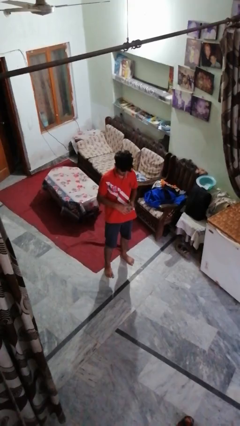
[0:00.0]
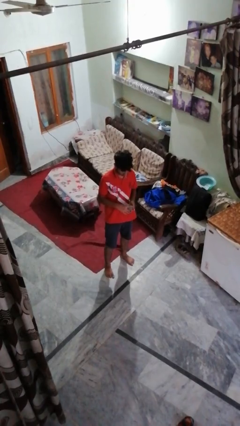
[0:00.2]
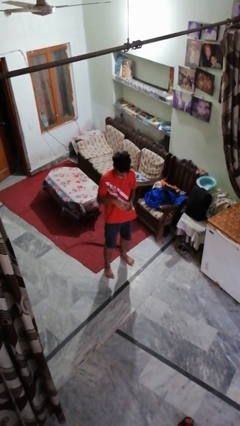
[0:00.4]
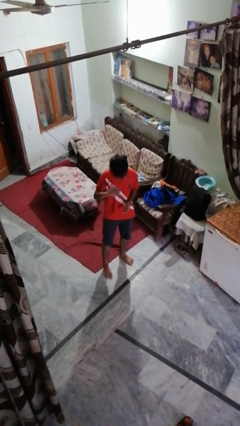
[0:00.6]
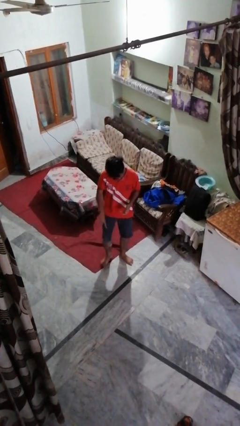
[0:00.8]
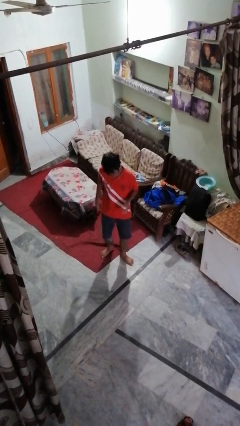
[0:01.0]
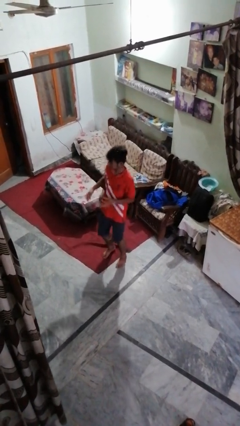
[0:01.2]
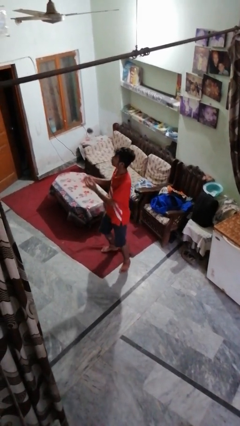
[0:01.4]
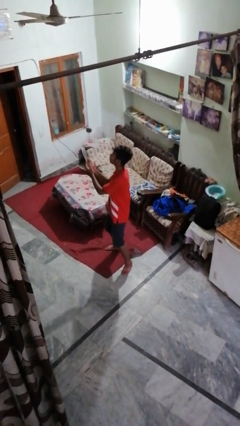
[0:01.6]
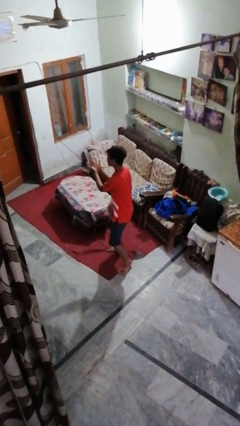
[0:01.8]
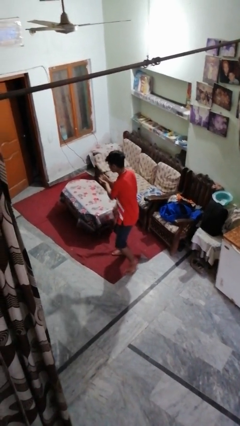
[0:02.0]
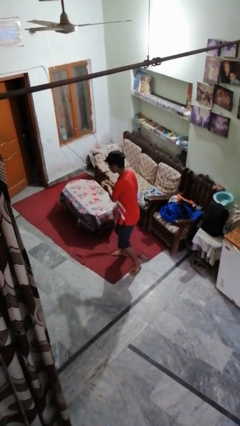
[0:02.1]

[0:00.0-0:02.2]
person bounces ball on floor

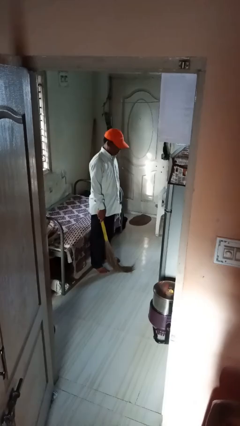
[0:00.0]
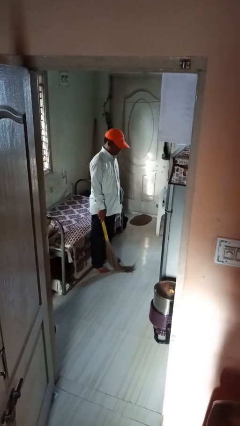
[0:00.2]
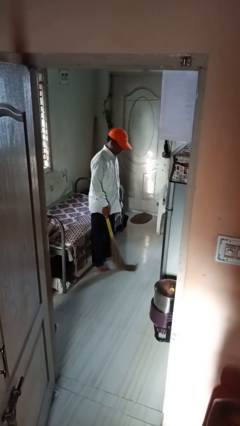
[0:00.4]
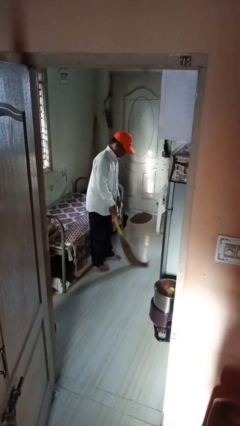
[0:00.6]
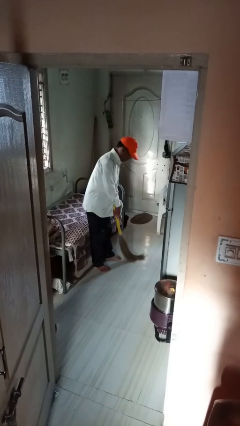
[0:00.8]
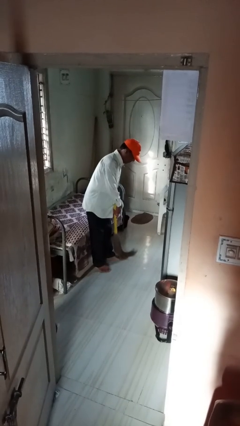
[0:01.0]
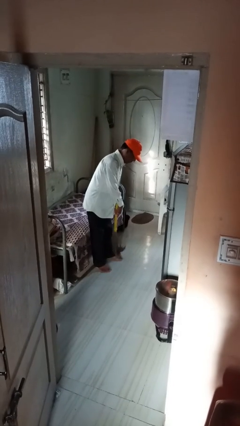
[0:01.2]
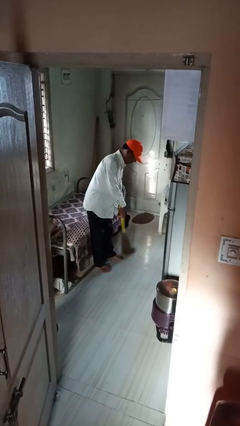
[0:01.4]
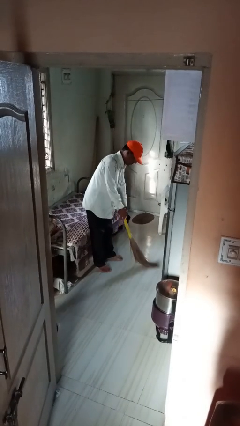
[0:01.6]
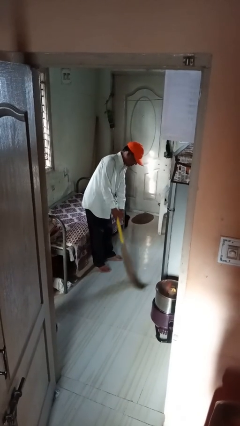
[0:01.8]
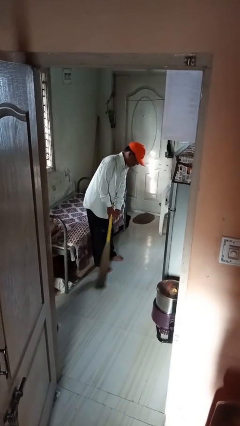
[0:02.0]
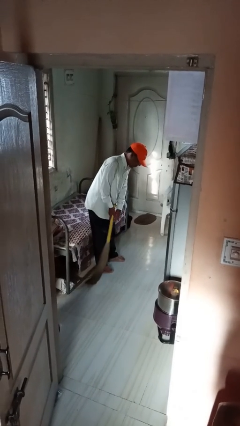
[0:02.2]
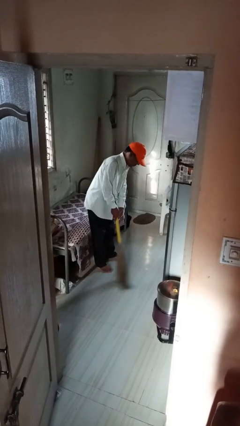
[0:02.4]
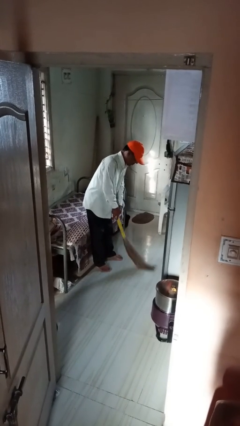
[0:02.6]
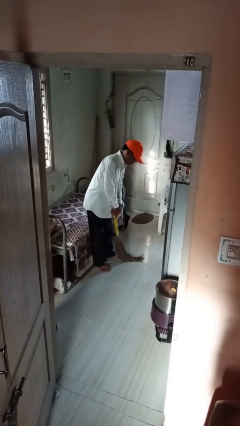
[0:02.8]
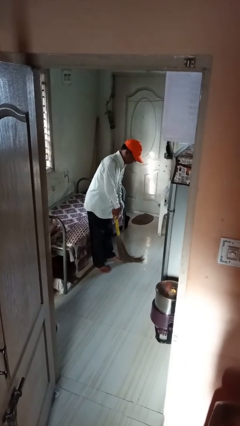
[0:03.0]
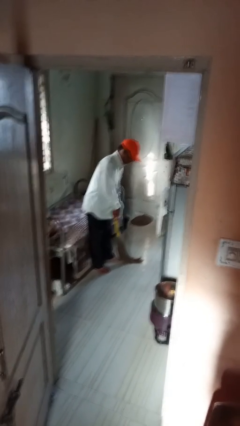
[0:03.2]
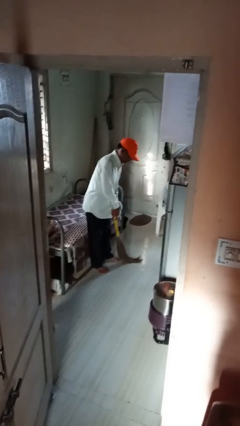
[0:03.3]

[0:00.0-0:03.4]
person sweeps floor

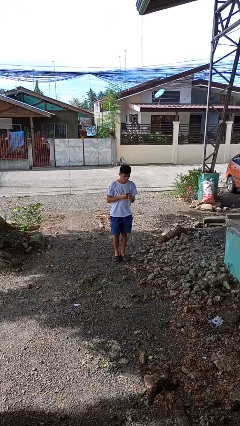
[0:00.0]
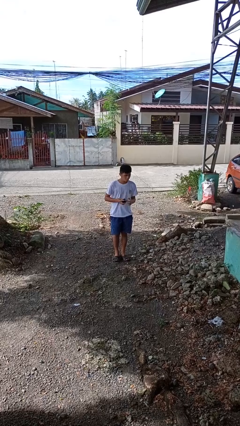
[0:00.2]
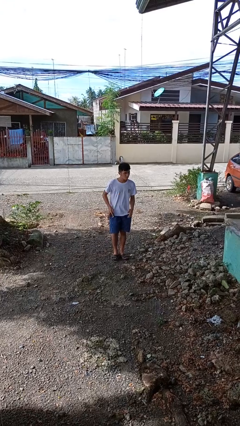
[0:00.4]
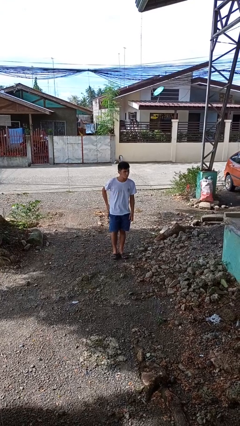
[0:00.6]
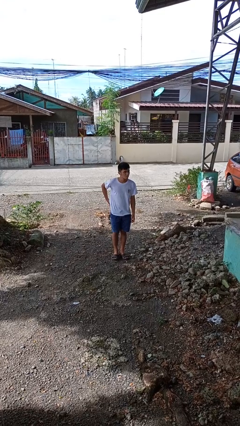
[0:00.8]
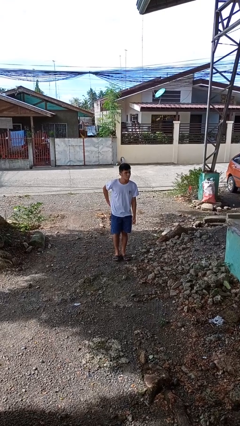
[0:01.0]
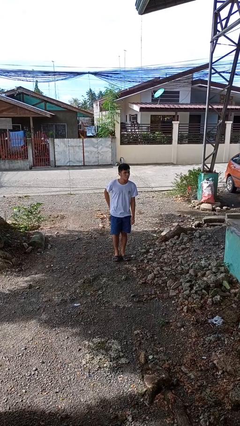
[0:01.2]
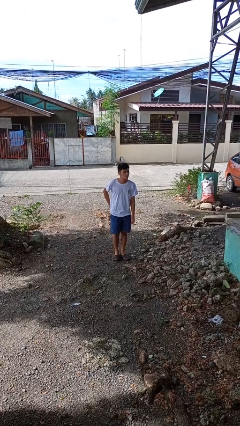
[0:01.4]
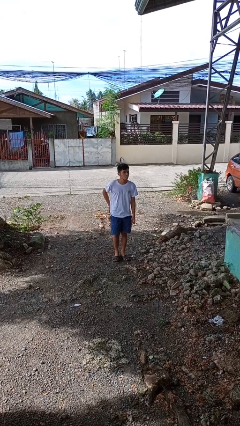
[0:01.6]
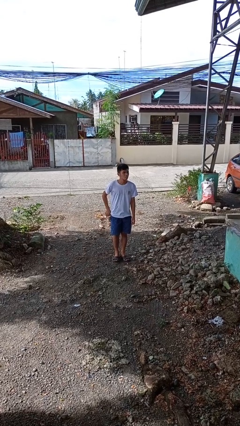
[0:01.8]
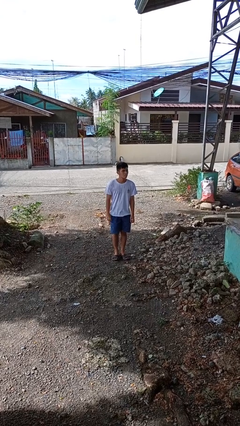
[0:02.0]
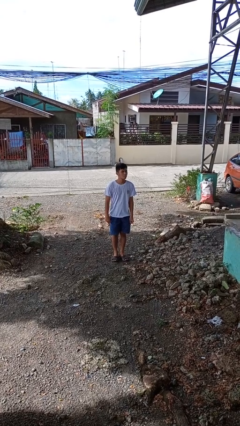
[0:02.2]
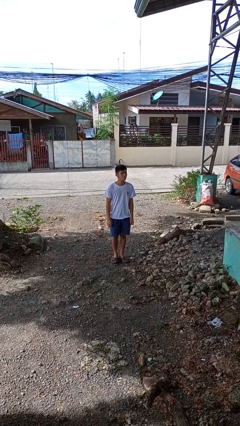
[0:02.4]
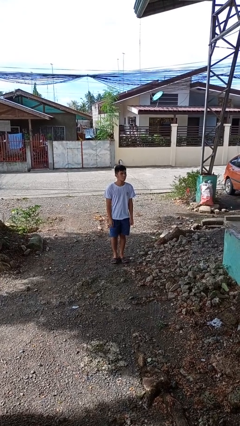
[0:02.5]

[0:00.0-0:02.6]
person puts phone into pocket

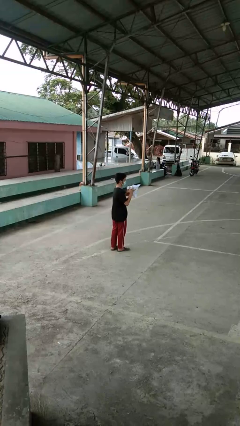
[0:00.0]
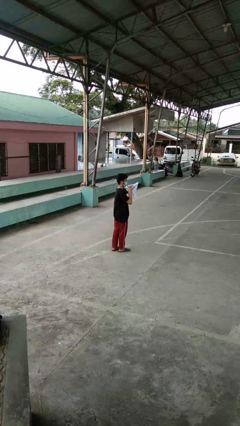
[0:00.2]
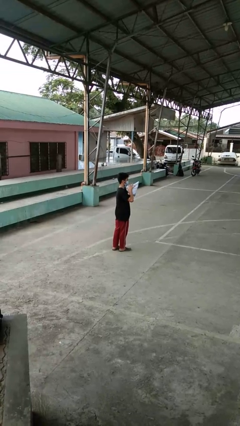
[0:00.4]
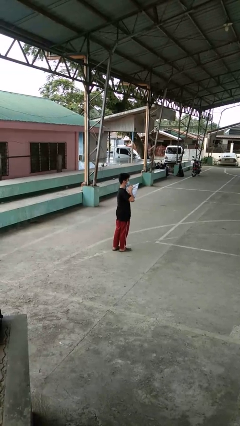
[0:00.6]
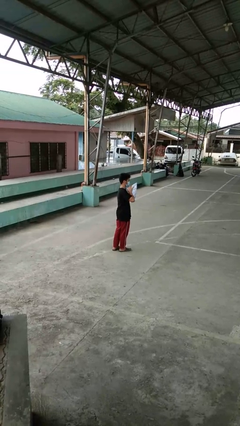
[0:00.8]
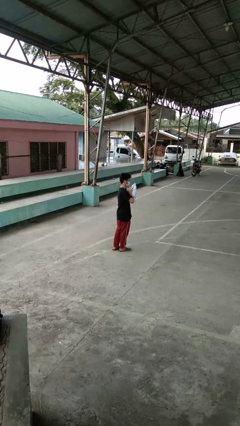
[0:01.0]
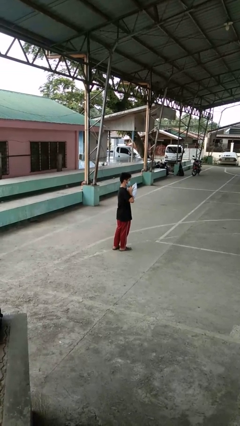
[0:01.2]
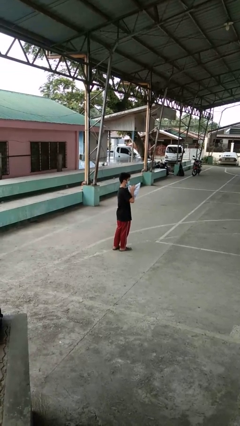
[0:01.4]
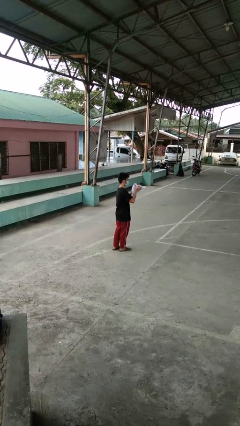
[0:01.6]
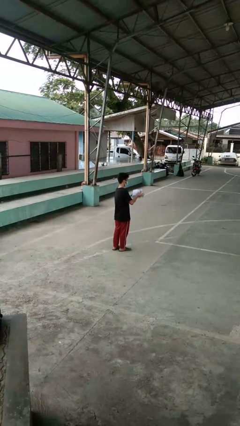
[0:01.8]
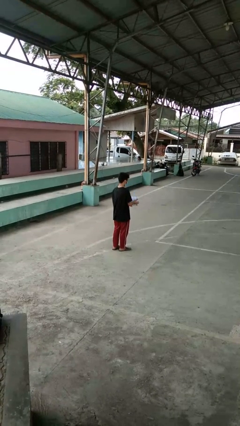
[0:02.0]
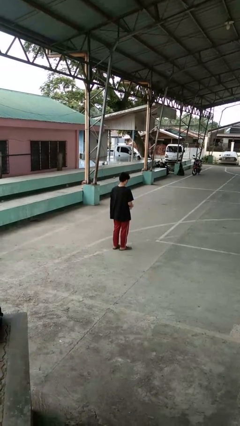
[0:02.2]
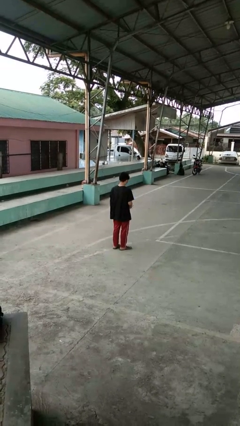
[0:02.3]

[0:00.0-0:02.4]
person squeezes object

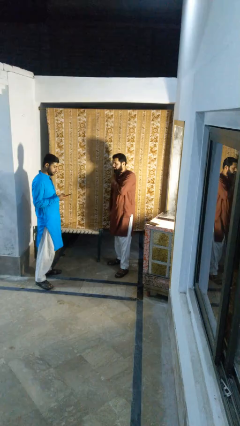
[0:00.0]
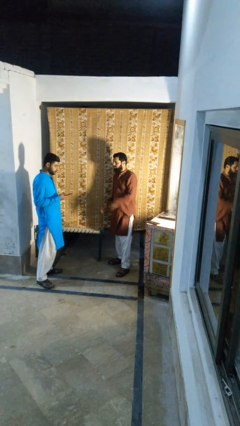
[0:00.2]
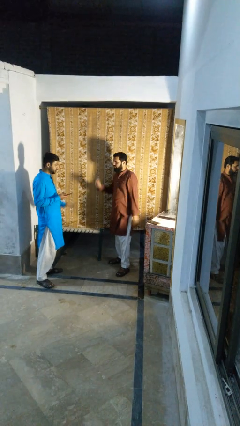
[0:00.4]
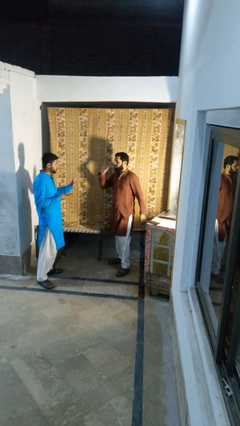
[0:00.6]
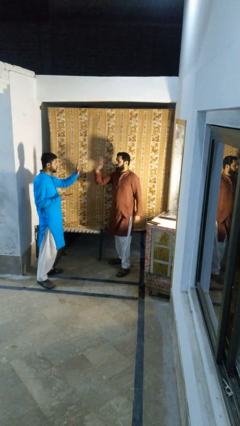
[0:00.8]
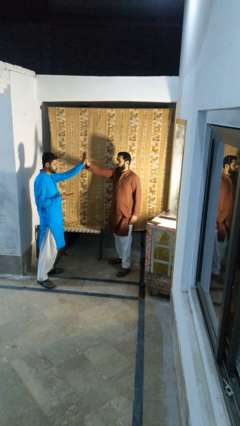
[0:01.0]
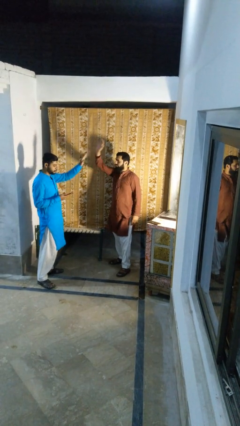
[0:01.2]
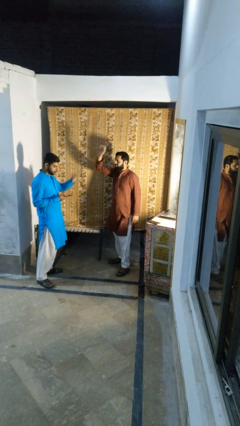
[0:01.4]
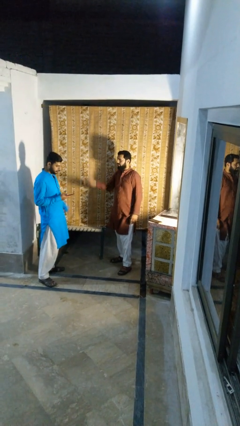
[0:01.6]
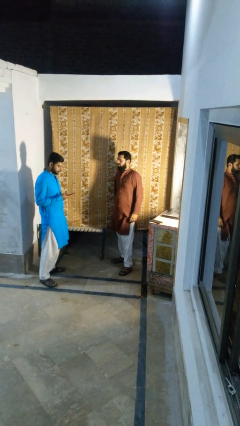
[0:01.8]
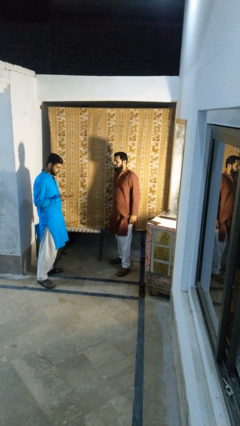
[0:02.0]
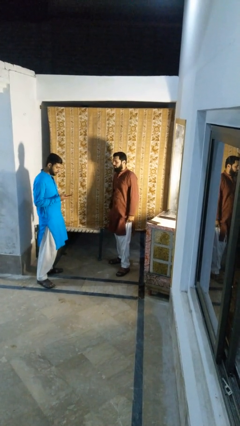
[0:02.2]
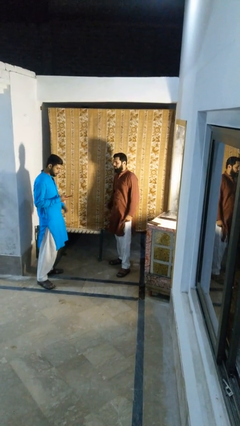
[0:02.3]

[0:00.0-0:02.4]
person highfives hand

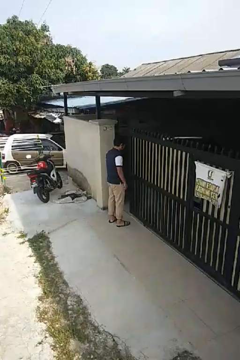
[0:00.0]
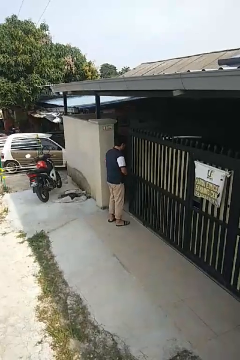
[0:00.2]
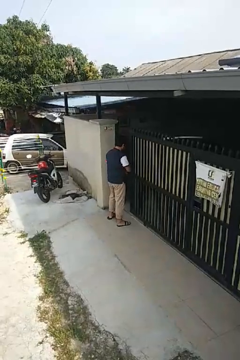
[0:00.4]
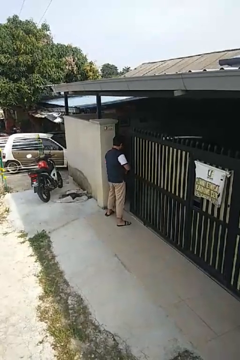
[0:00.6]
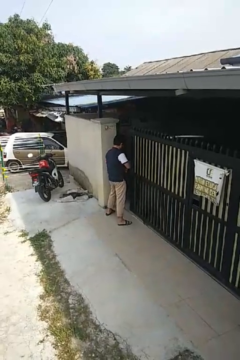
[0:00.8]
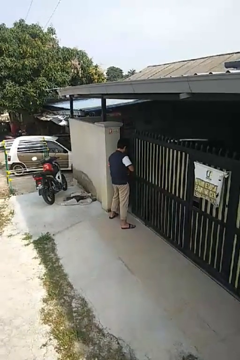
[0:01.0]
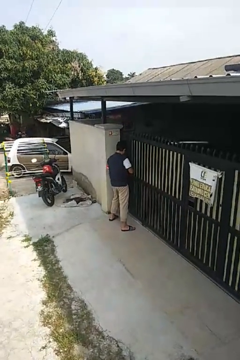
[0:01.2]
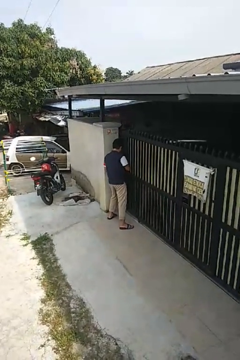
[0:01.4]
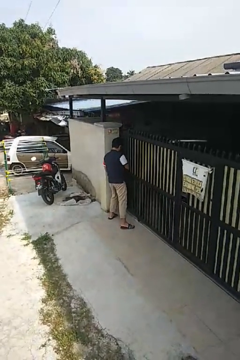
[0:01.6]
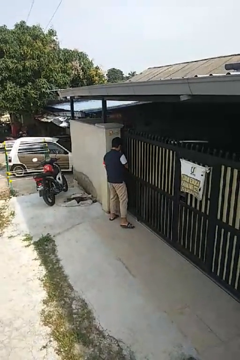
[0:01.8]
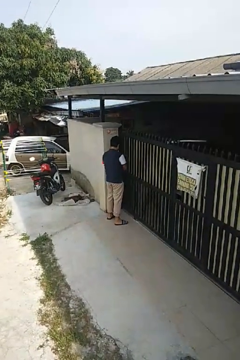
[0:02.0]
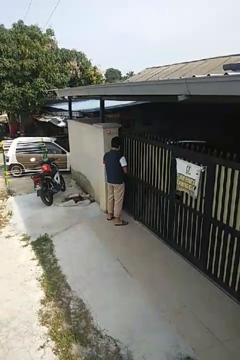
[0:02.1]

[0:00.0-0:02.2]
person closes sliding door

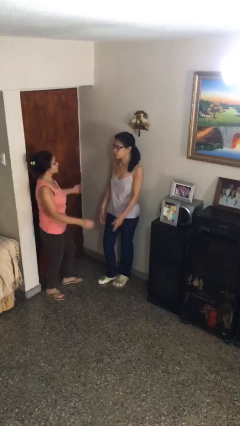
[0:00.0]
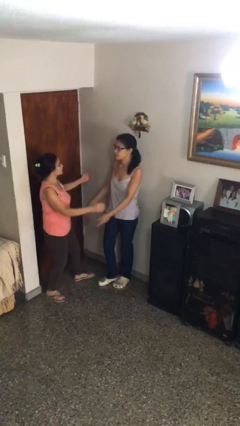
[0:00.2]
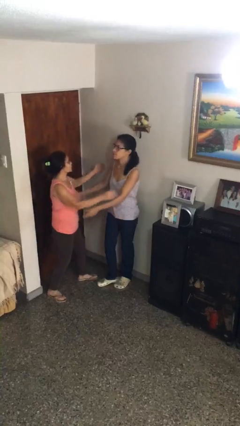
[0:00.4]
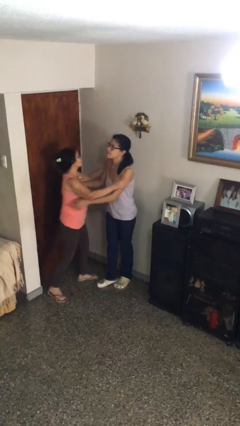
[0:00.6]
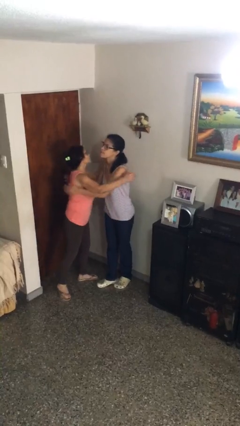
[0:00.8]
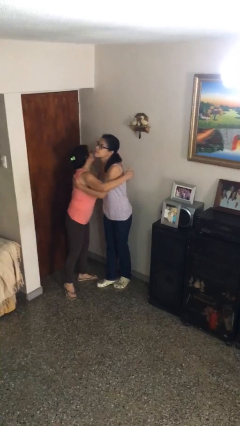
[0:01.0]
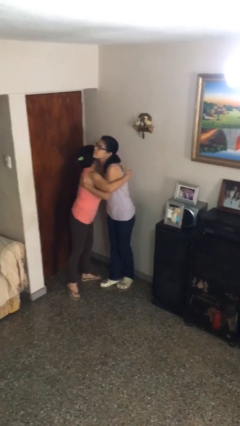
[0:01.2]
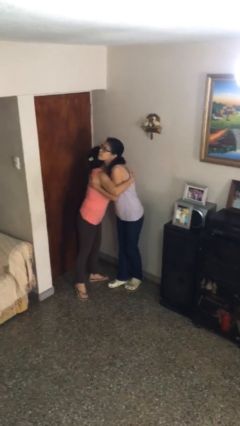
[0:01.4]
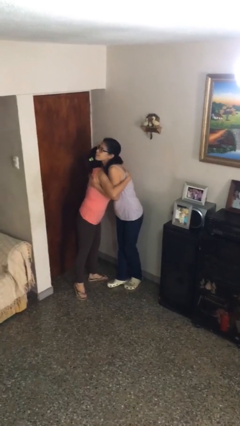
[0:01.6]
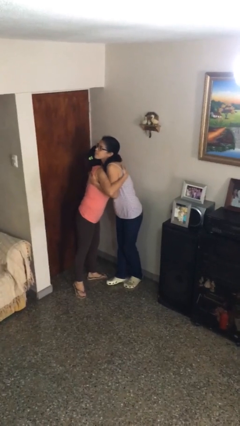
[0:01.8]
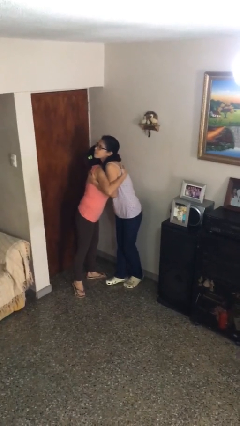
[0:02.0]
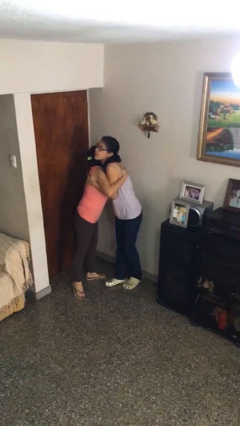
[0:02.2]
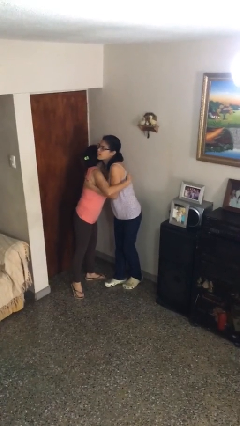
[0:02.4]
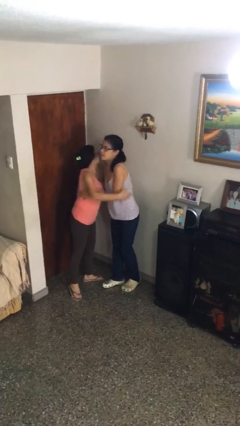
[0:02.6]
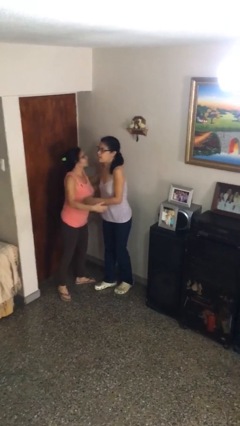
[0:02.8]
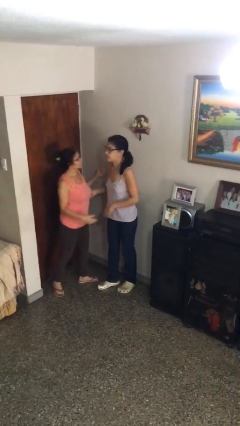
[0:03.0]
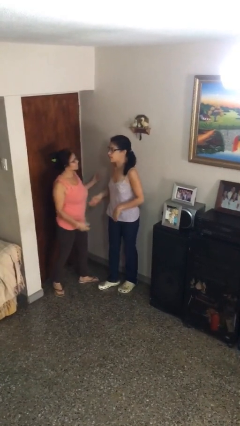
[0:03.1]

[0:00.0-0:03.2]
person embraces person
